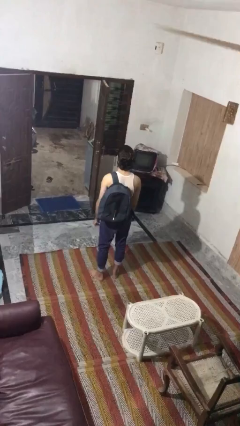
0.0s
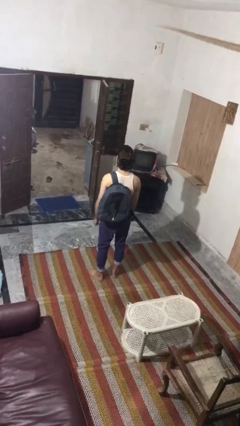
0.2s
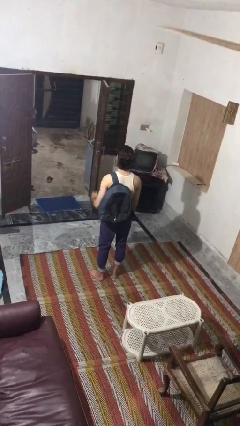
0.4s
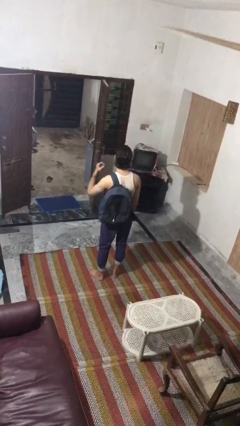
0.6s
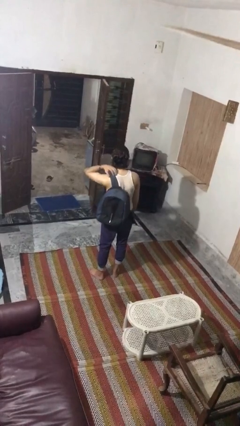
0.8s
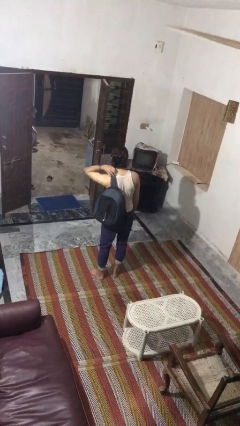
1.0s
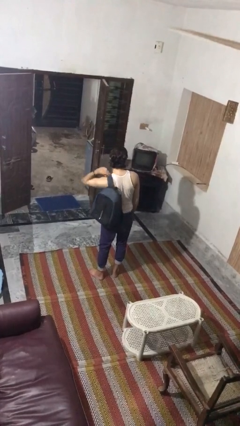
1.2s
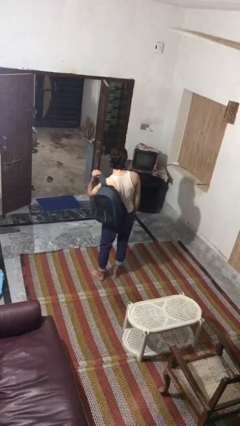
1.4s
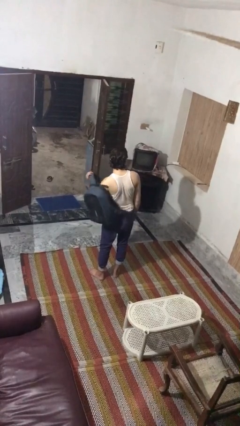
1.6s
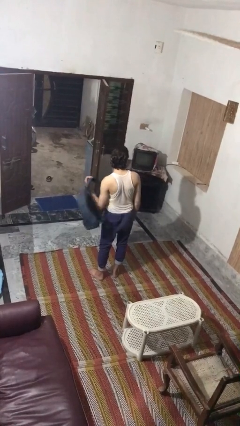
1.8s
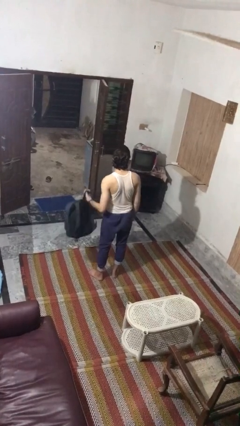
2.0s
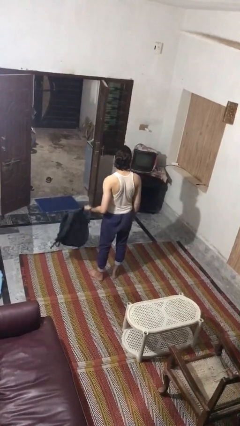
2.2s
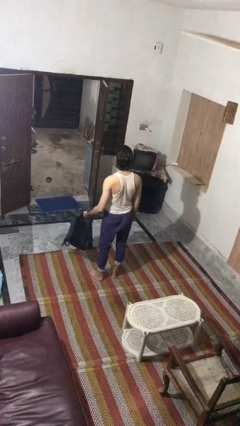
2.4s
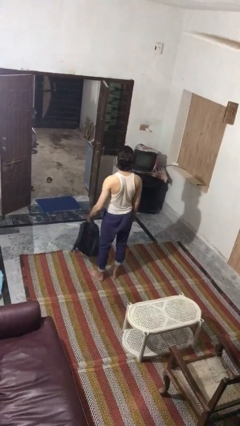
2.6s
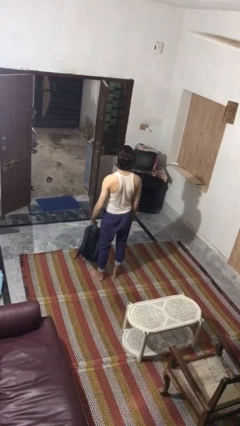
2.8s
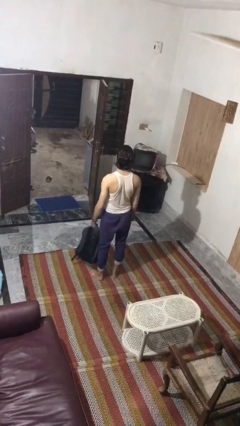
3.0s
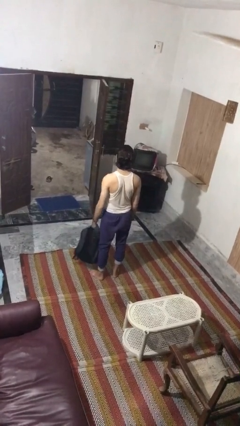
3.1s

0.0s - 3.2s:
person takes off backpack

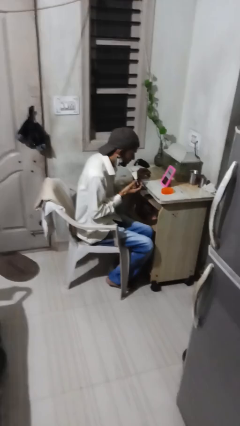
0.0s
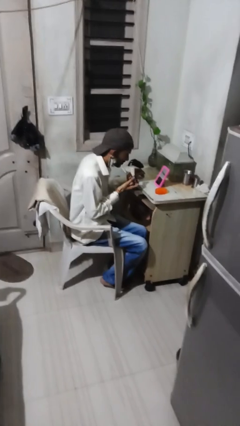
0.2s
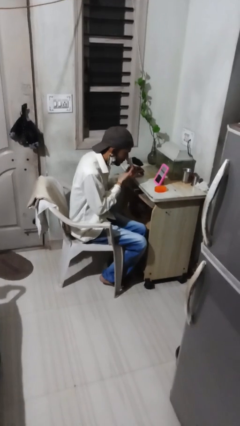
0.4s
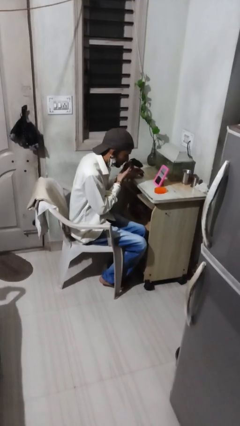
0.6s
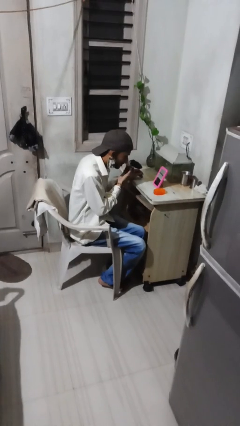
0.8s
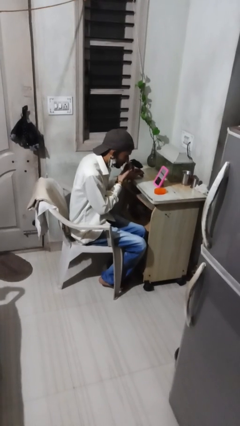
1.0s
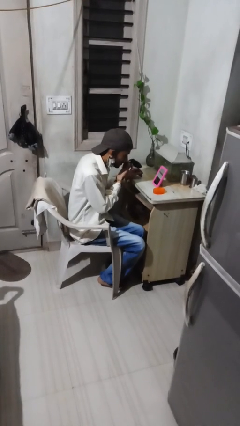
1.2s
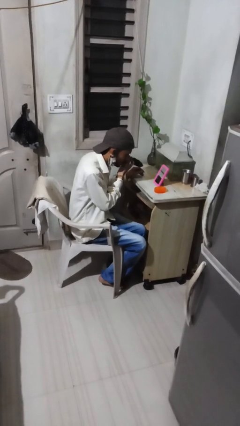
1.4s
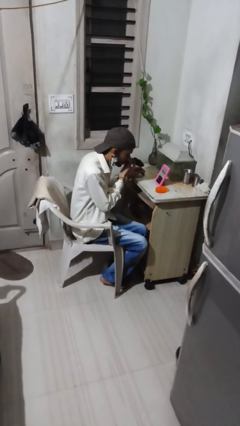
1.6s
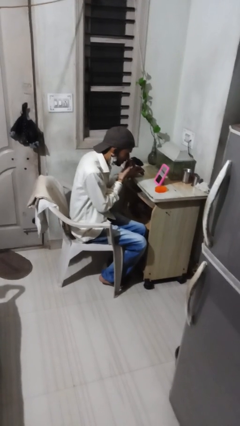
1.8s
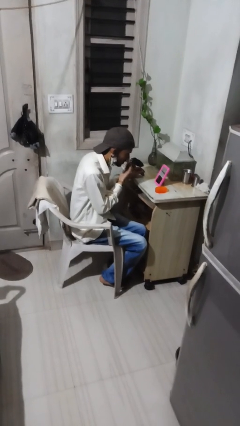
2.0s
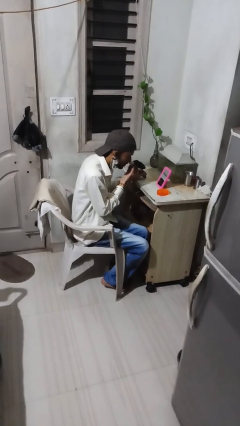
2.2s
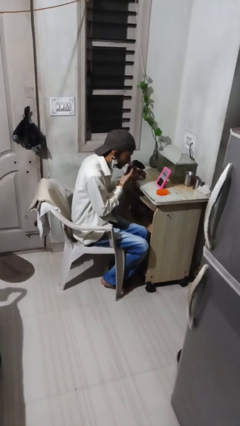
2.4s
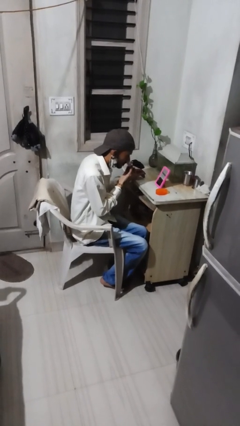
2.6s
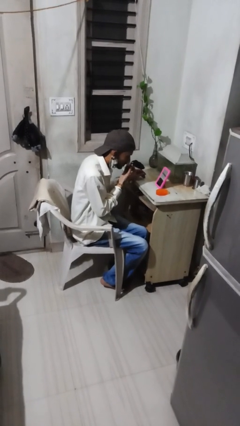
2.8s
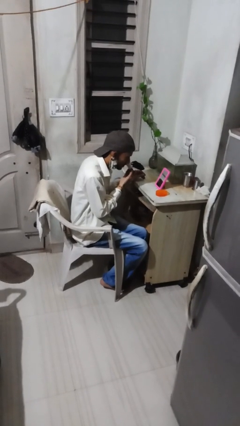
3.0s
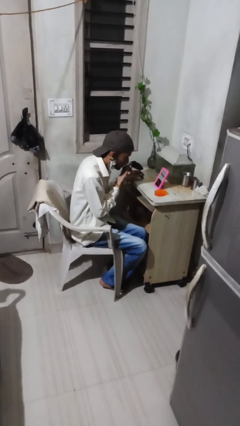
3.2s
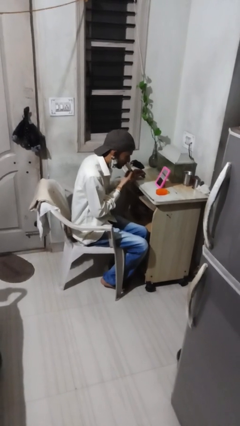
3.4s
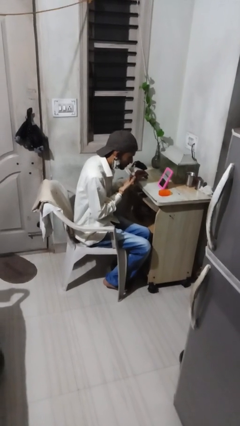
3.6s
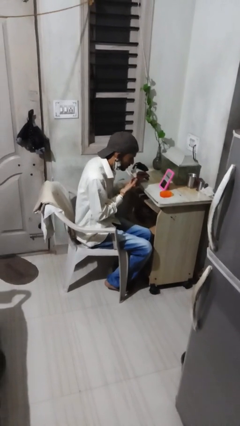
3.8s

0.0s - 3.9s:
person applies foundation makeup

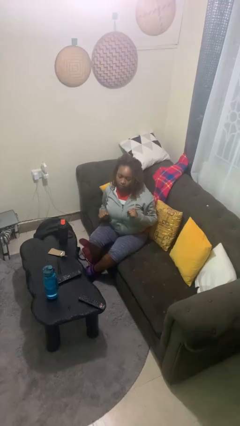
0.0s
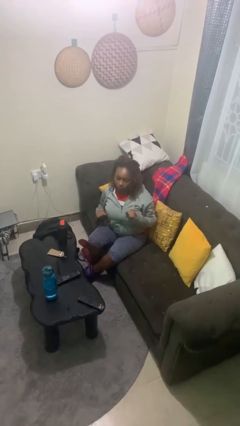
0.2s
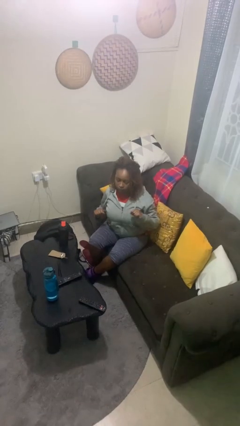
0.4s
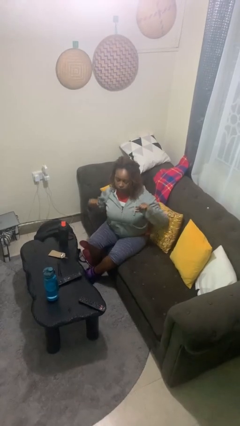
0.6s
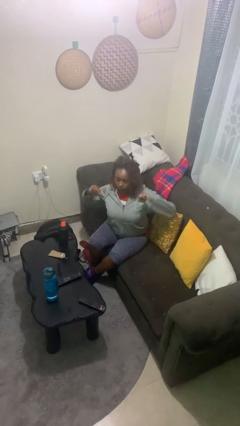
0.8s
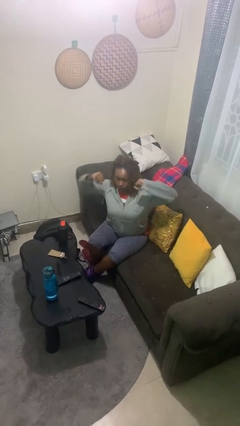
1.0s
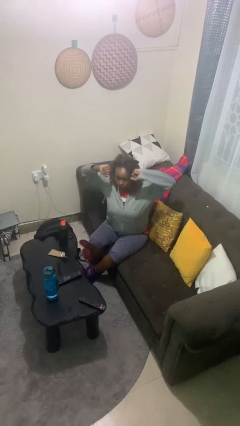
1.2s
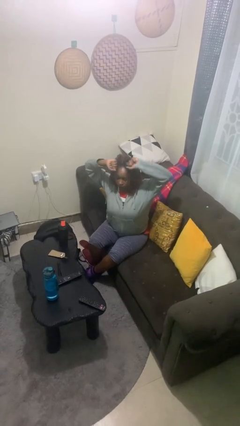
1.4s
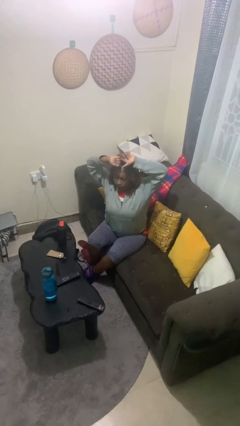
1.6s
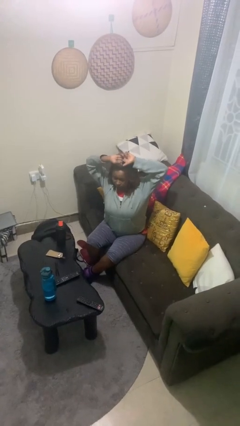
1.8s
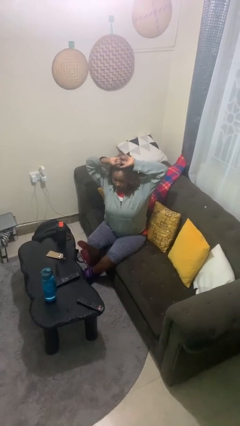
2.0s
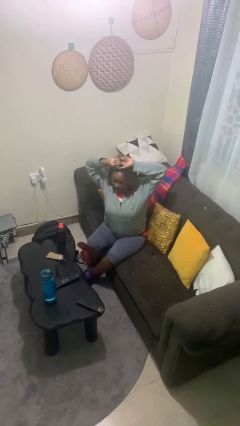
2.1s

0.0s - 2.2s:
person stretches arms over head

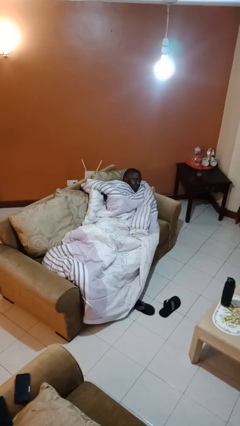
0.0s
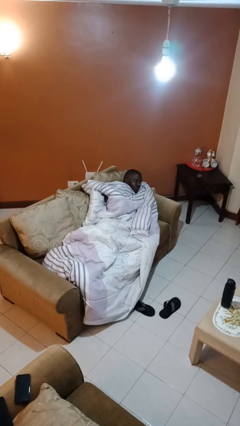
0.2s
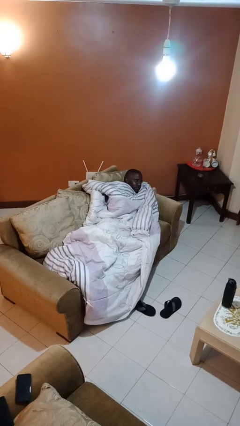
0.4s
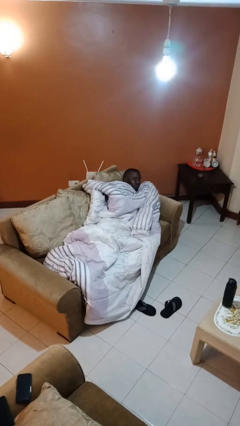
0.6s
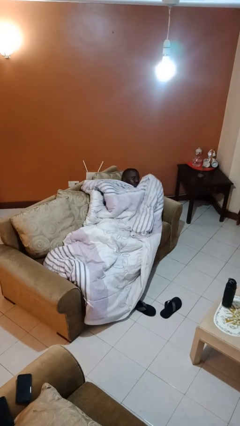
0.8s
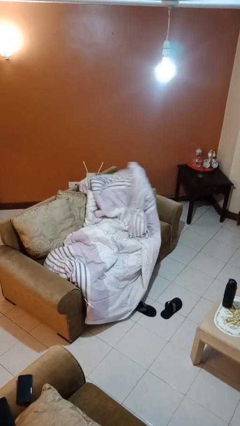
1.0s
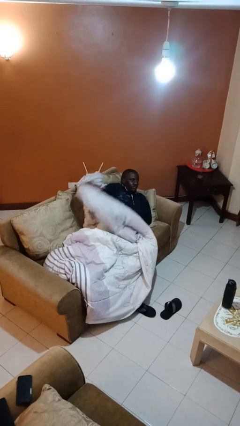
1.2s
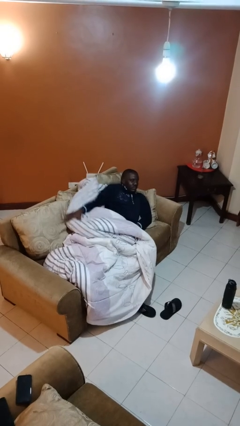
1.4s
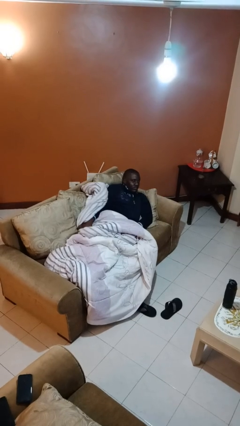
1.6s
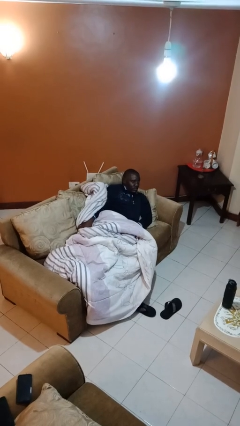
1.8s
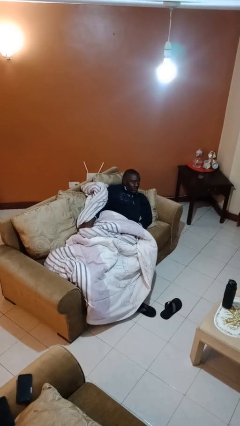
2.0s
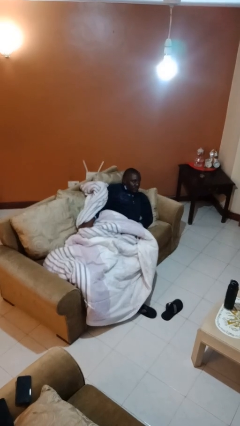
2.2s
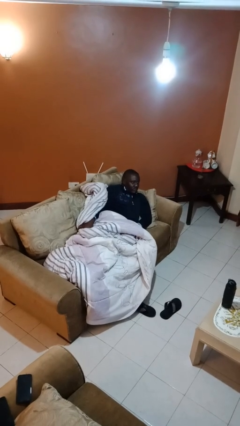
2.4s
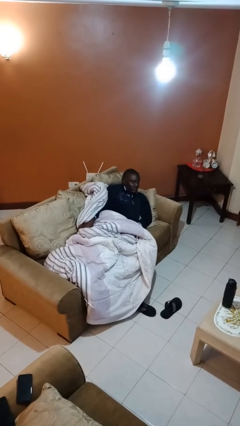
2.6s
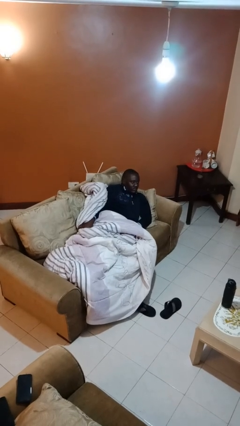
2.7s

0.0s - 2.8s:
person uncovers with blanket

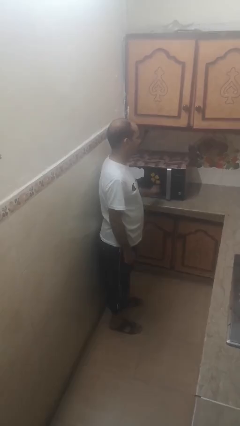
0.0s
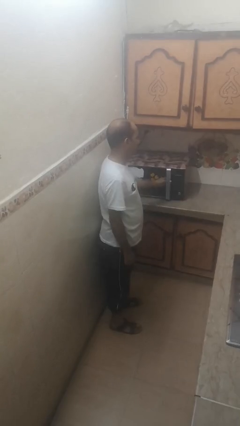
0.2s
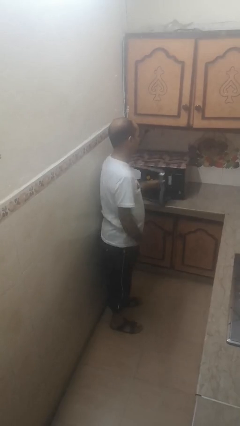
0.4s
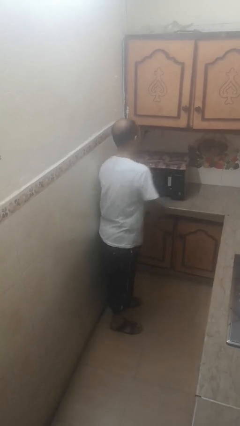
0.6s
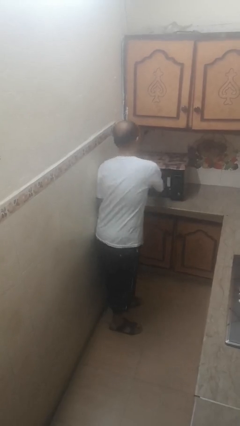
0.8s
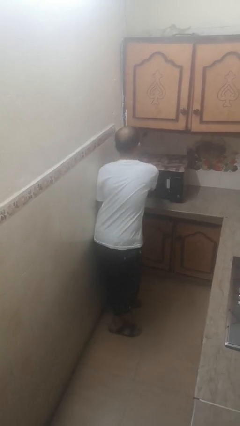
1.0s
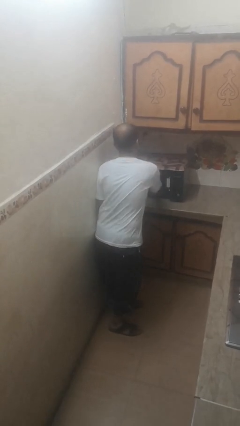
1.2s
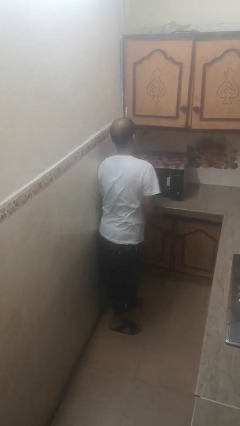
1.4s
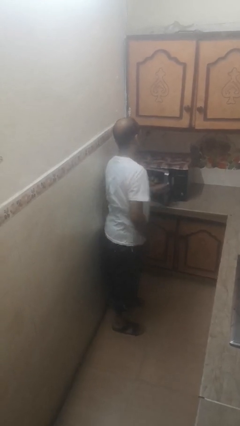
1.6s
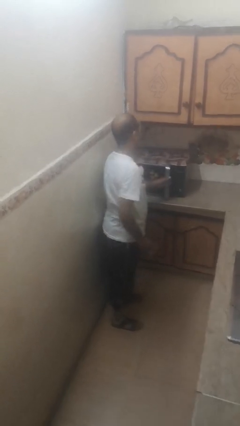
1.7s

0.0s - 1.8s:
person takes object from microwave

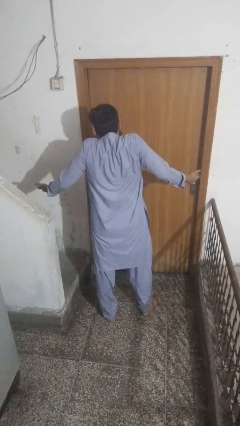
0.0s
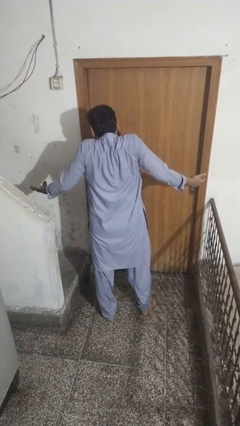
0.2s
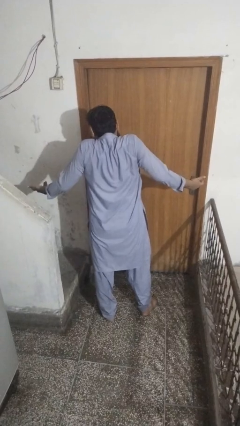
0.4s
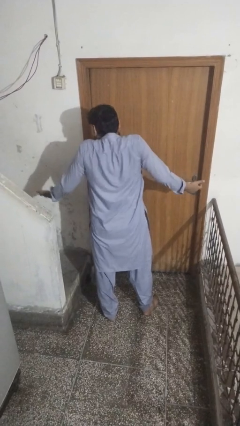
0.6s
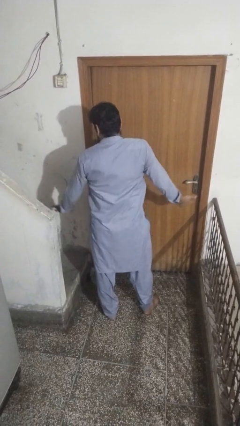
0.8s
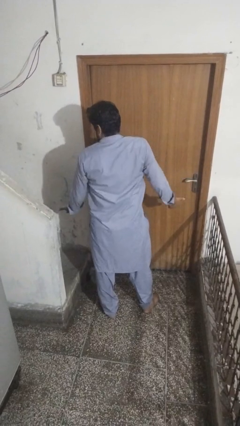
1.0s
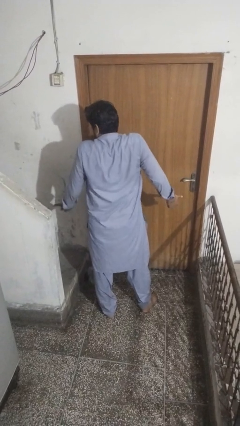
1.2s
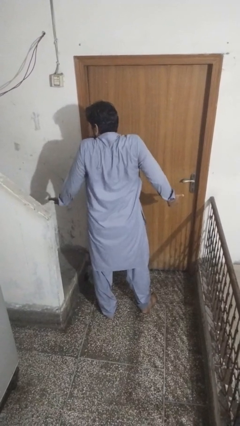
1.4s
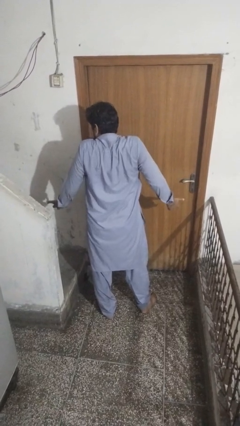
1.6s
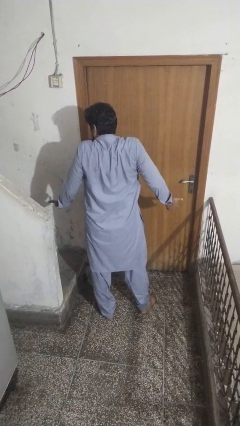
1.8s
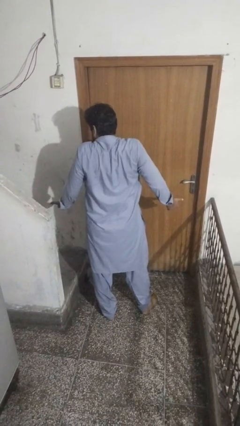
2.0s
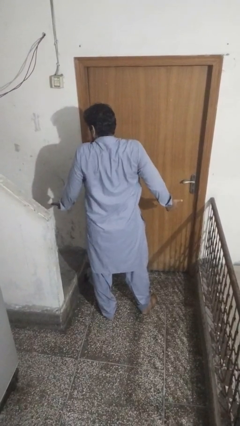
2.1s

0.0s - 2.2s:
person shrugs

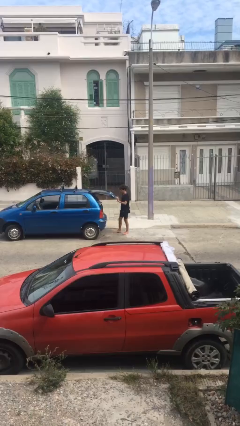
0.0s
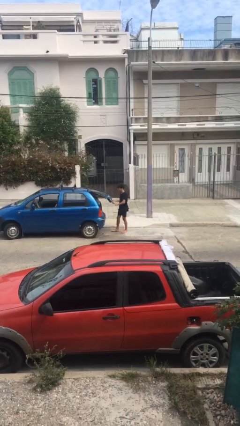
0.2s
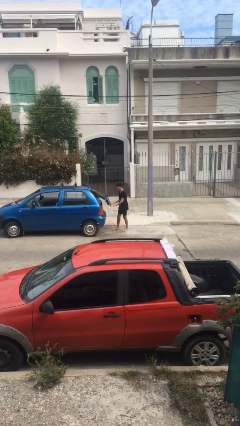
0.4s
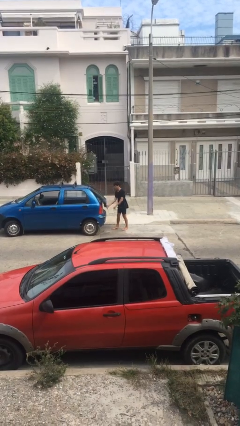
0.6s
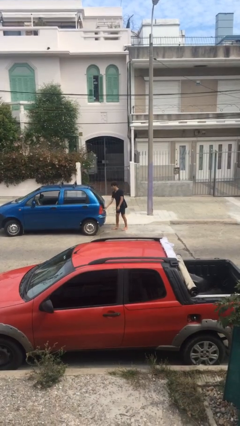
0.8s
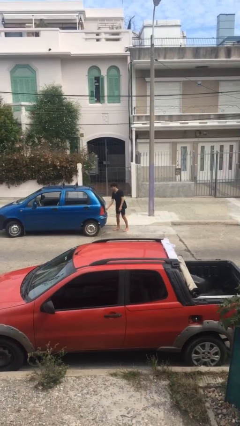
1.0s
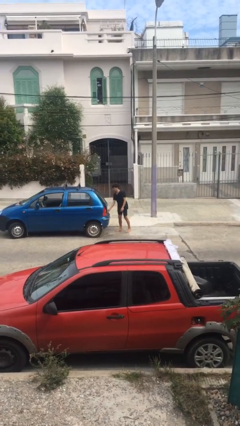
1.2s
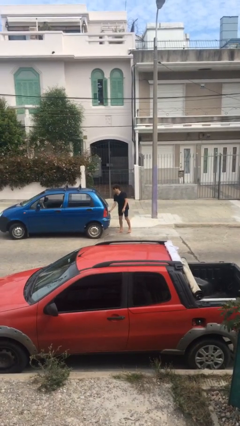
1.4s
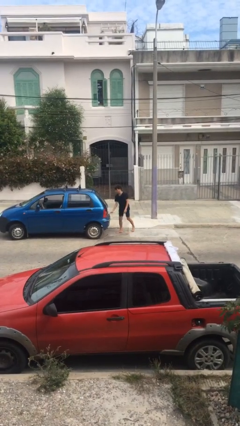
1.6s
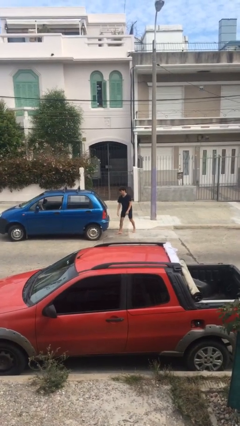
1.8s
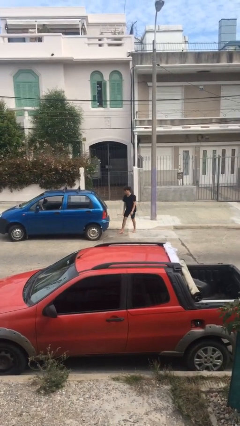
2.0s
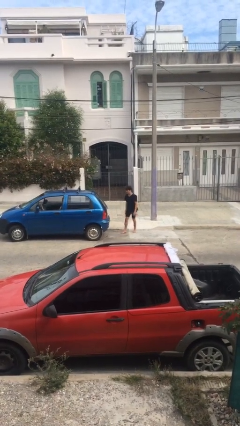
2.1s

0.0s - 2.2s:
person closes car trunk
